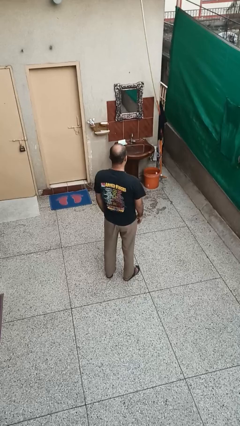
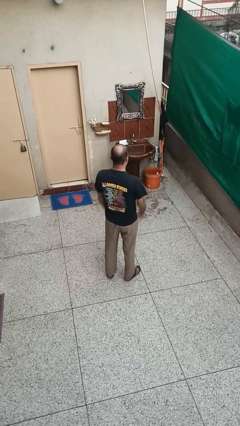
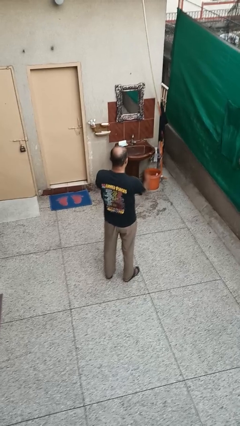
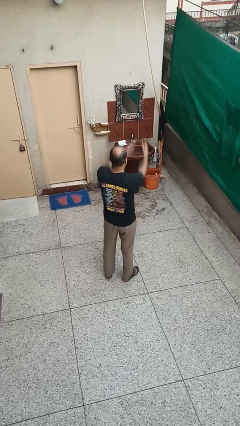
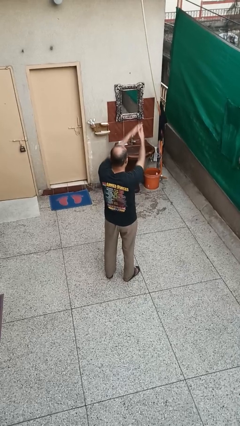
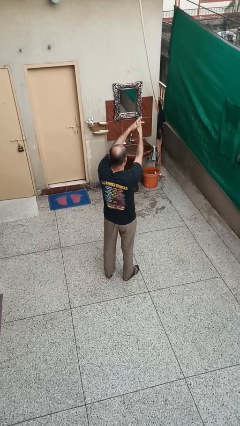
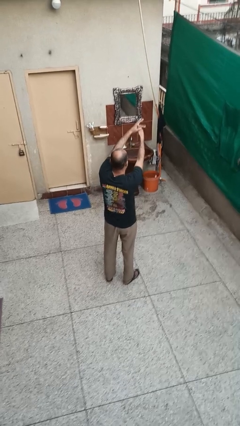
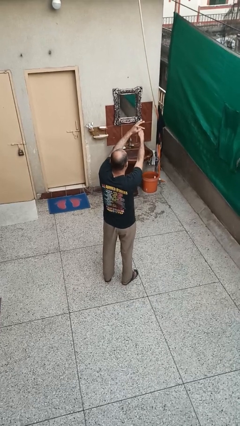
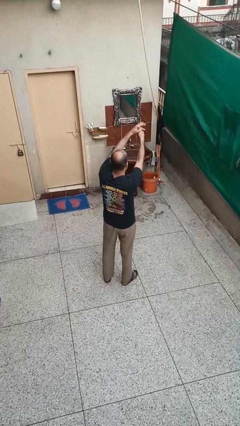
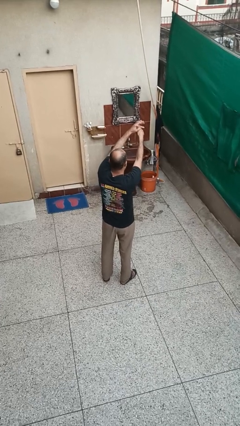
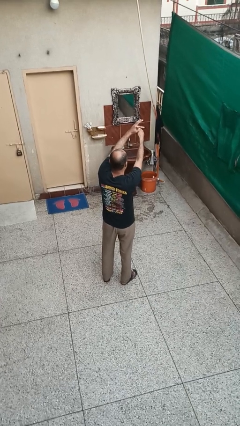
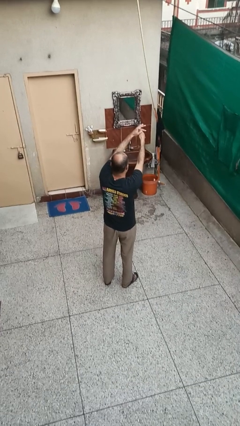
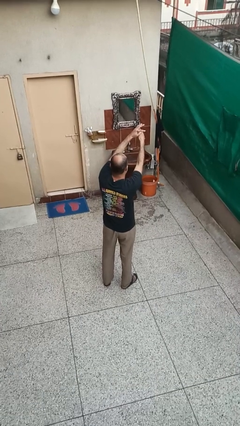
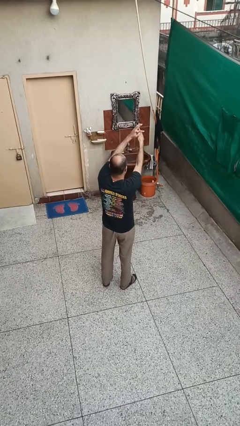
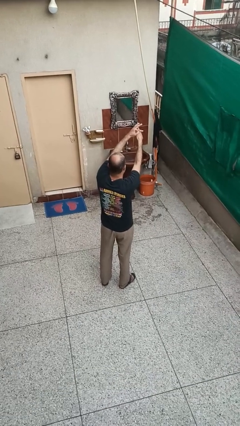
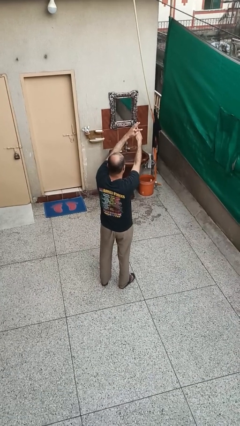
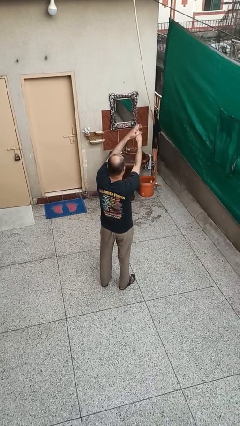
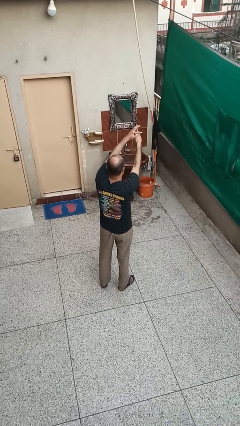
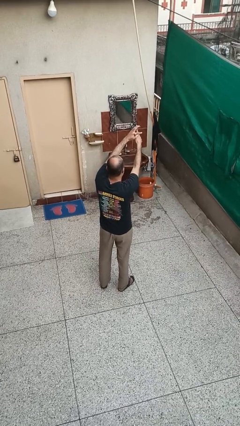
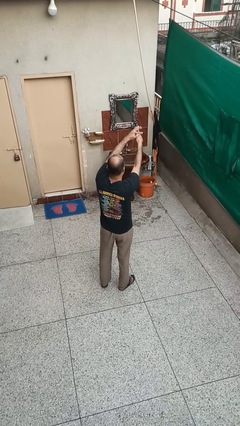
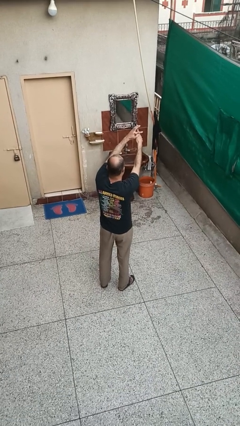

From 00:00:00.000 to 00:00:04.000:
person cracks knuckles

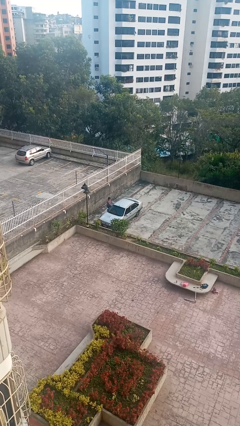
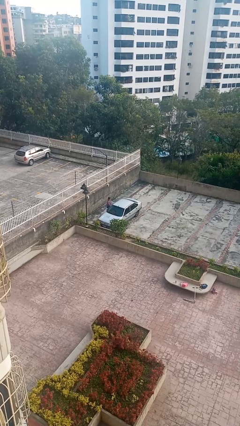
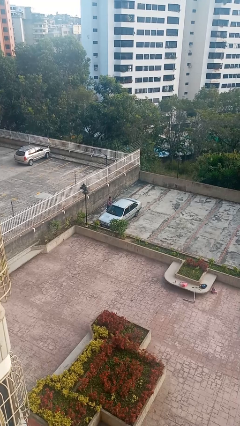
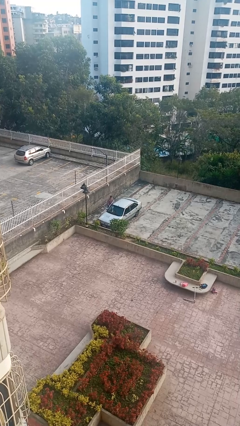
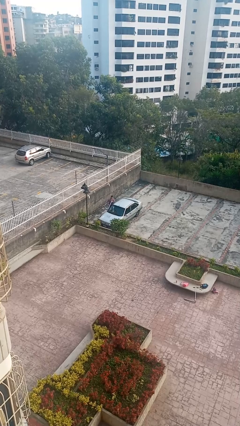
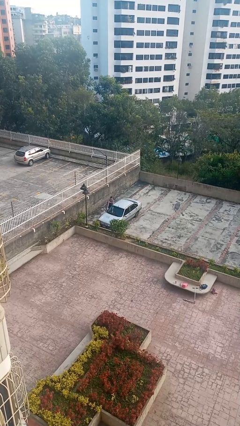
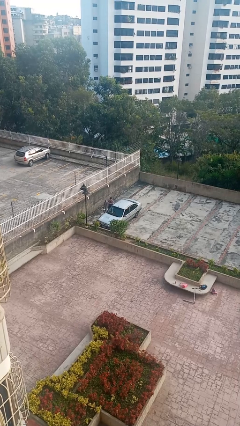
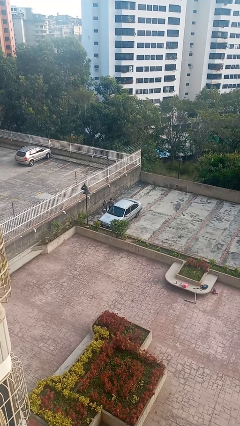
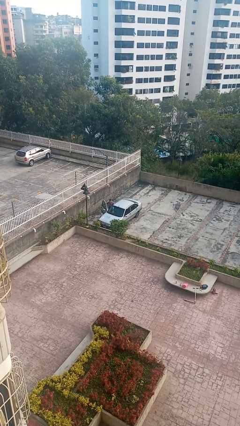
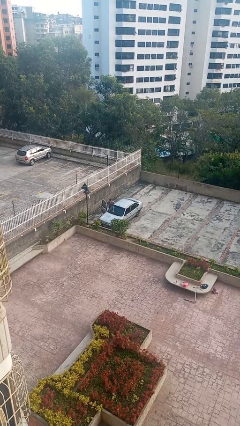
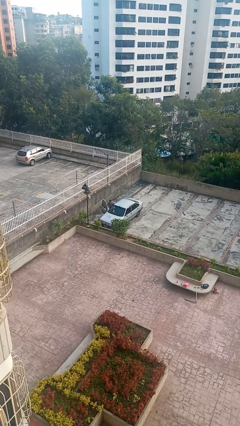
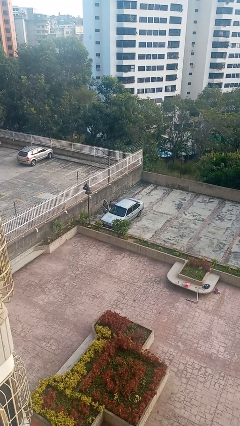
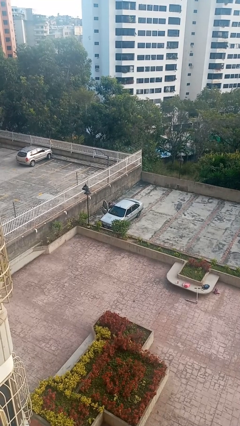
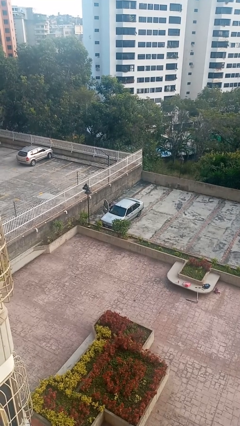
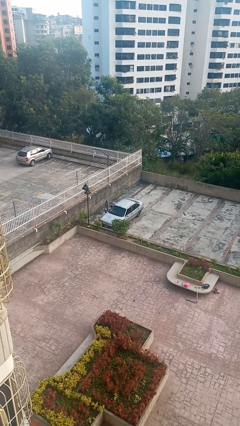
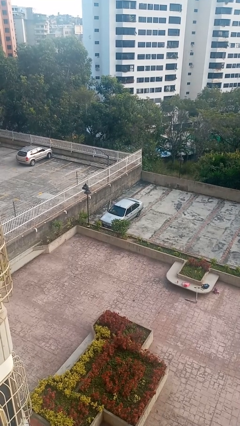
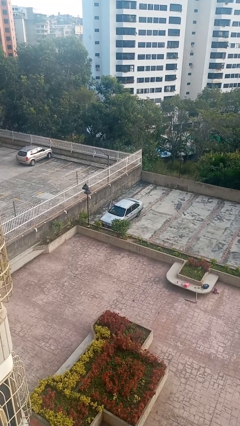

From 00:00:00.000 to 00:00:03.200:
car picks up person

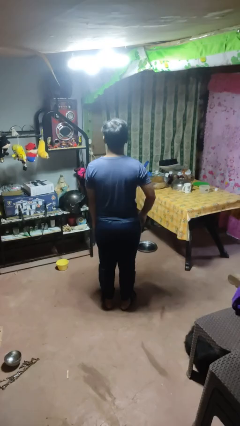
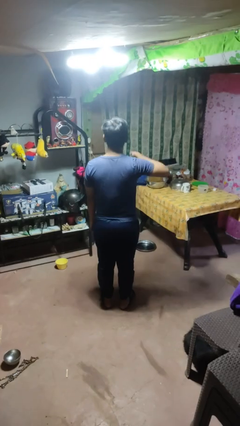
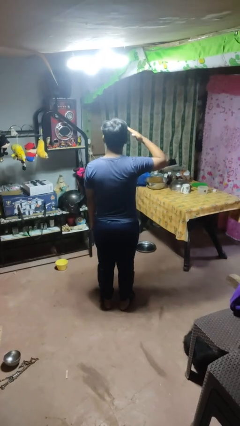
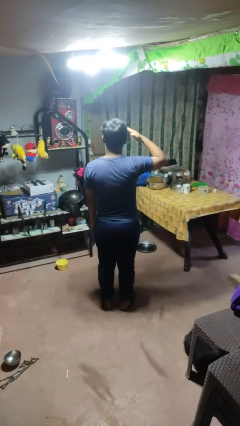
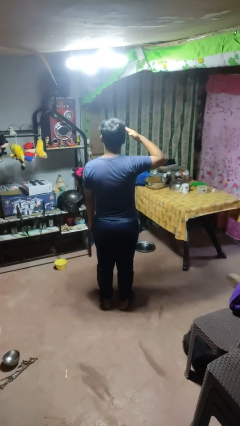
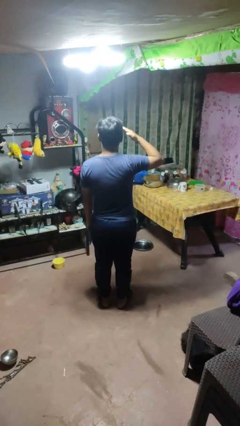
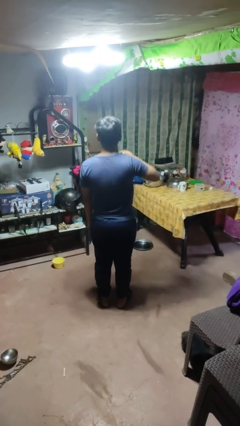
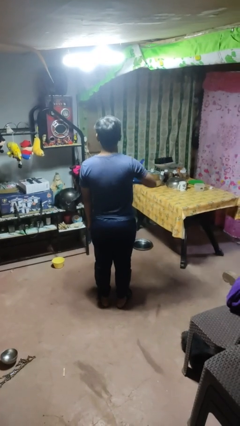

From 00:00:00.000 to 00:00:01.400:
person salutes

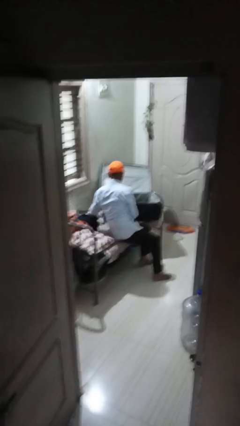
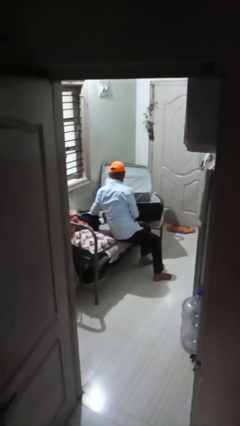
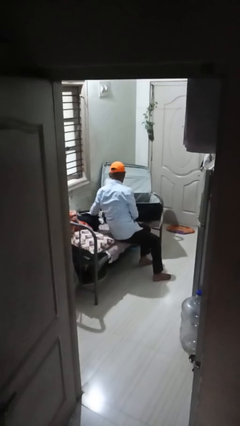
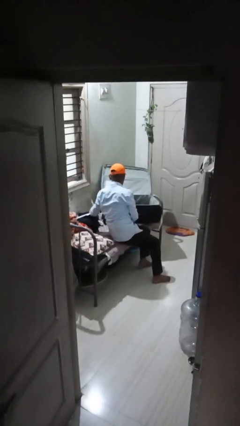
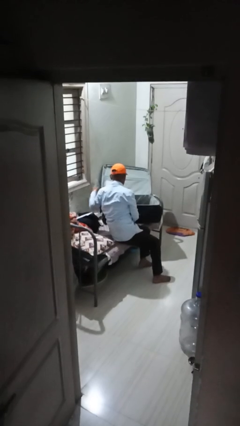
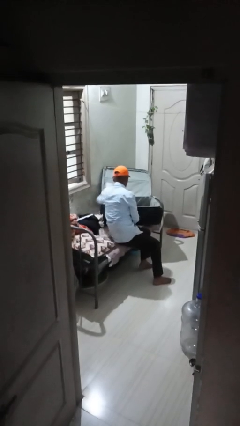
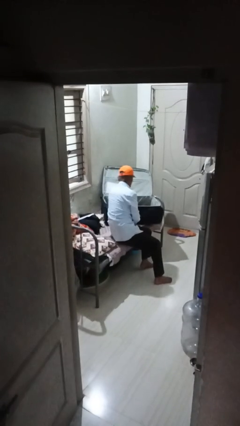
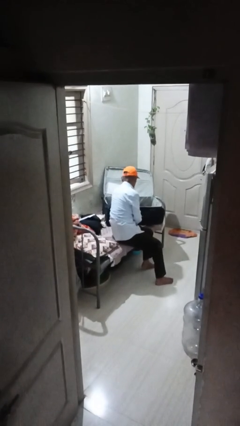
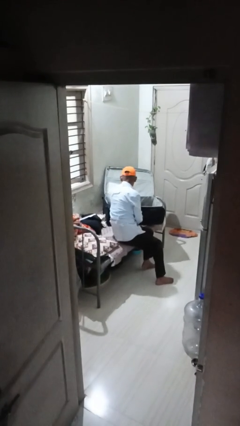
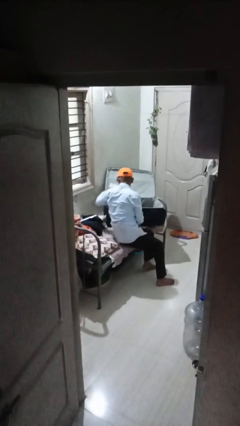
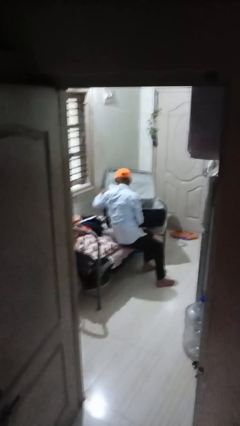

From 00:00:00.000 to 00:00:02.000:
person loads clothes into suitcase

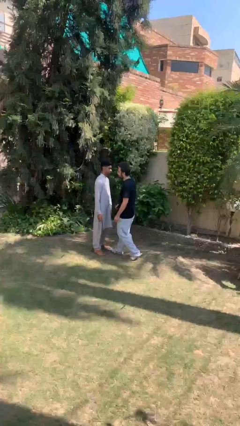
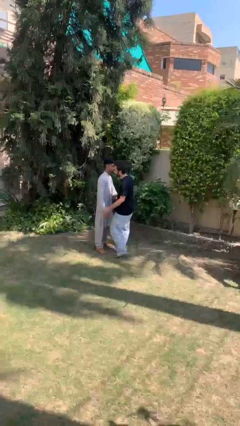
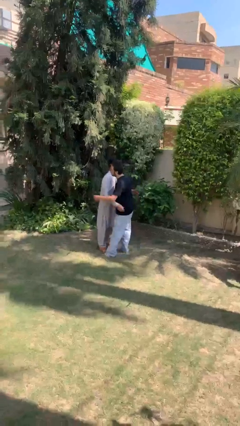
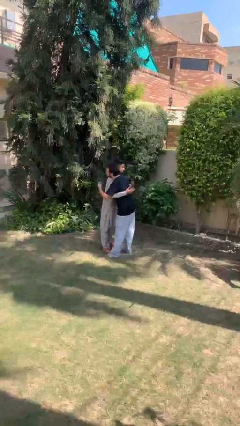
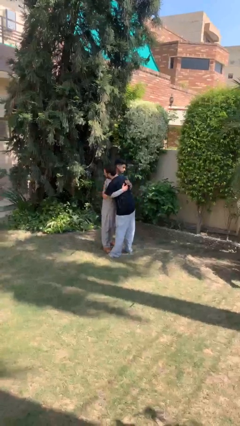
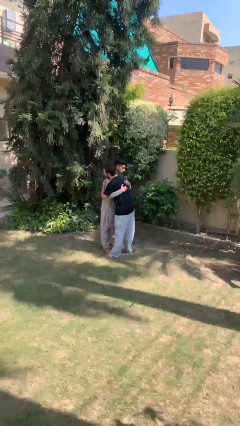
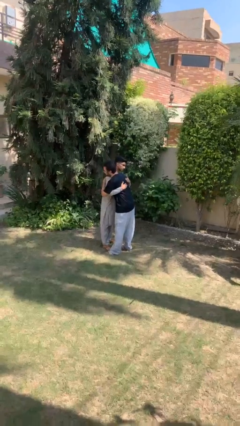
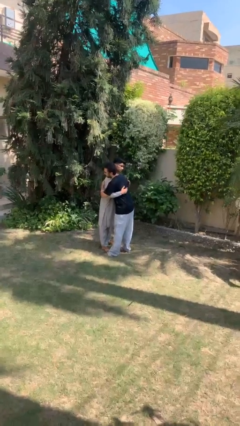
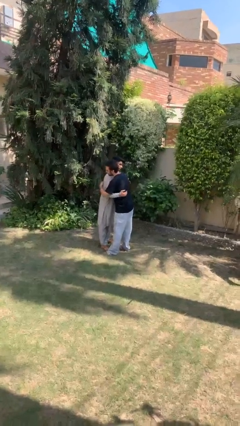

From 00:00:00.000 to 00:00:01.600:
person embraces person

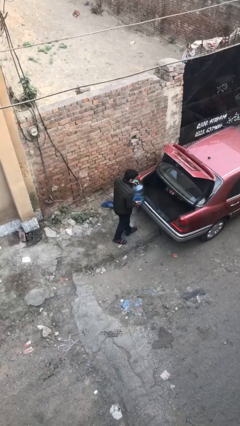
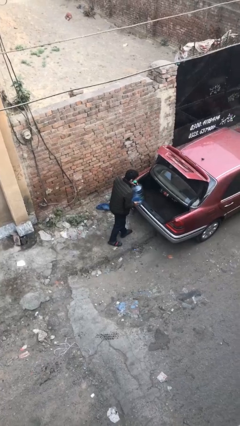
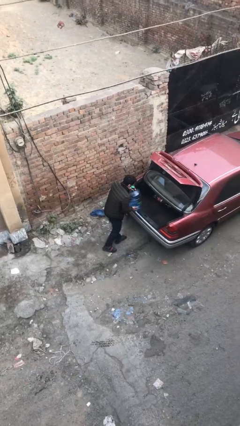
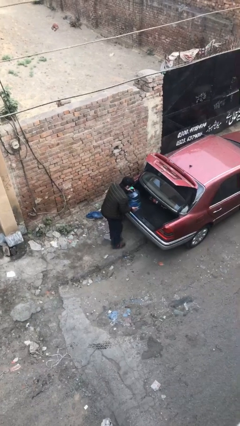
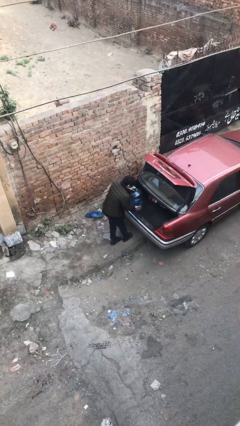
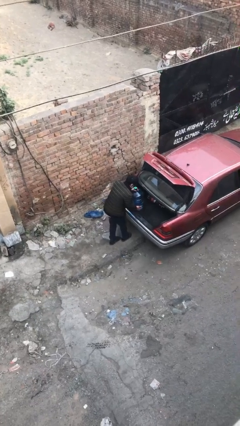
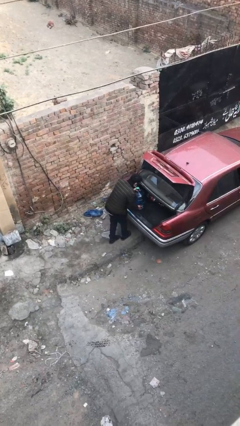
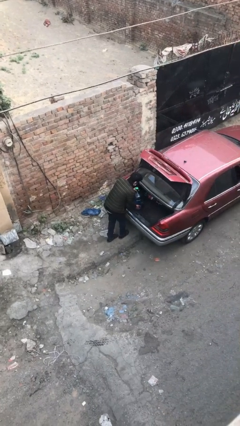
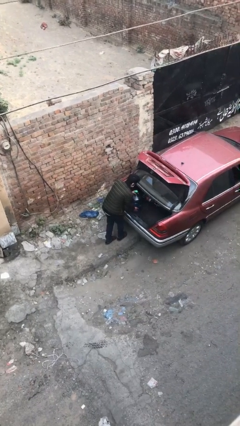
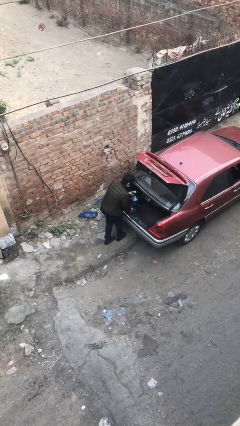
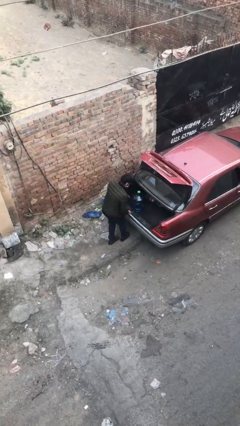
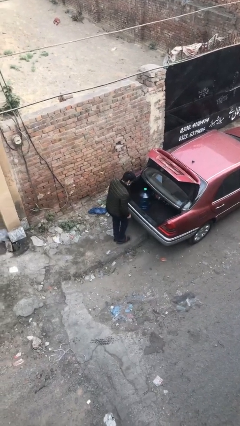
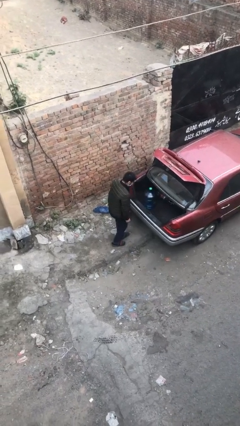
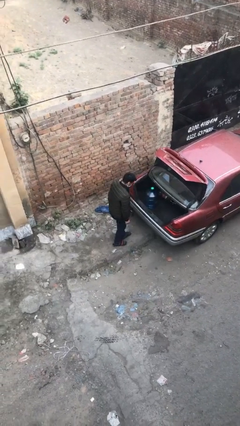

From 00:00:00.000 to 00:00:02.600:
person loads car

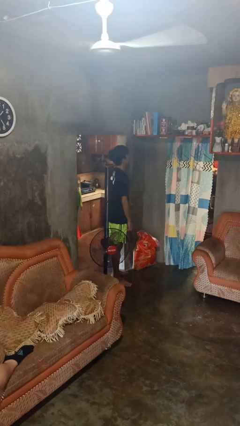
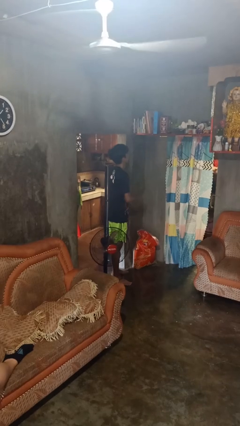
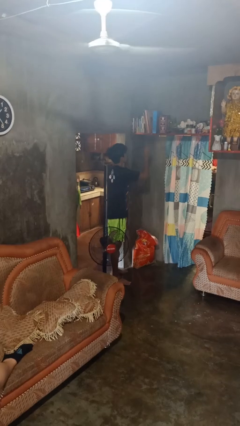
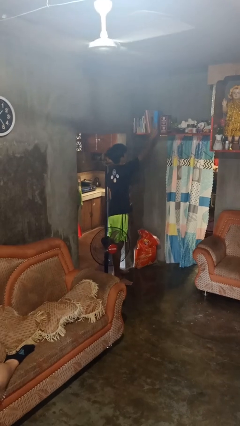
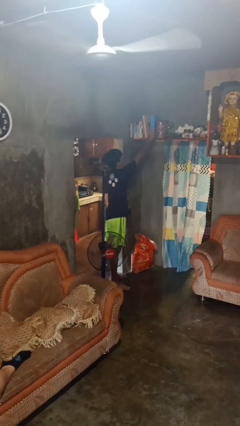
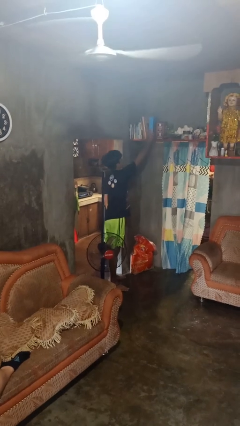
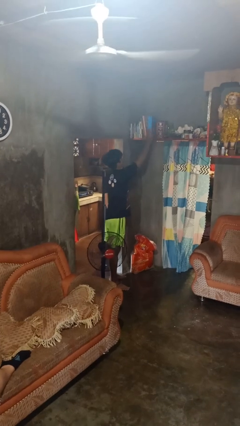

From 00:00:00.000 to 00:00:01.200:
person picks up object from shelf

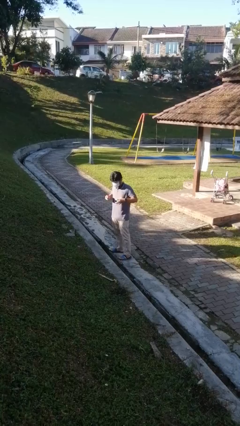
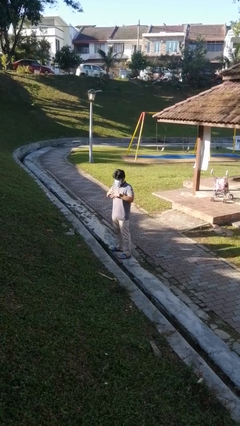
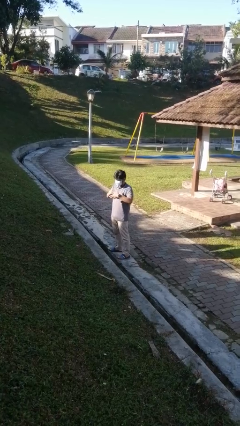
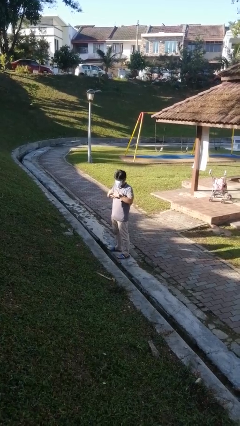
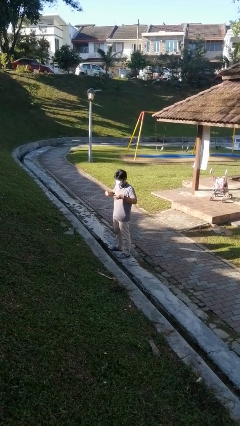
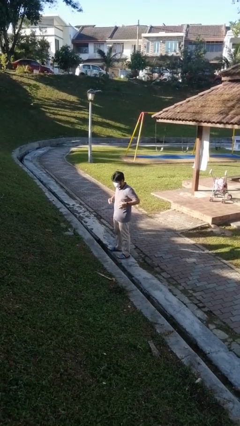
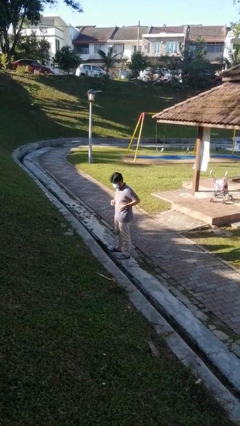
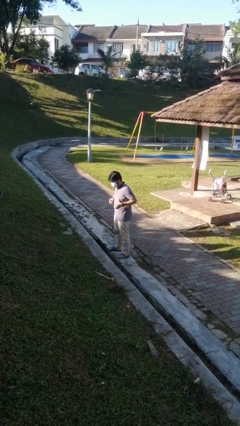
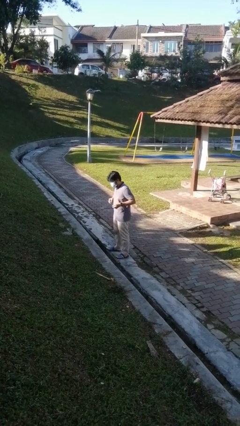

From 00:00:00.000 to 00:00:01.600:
person takes off ring
